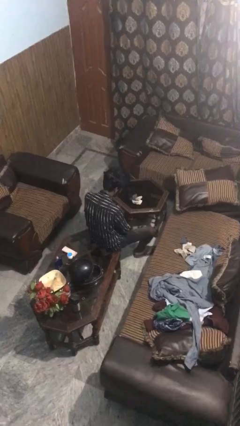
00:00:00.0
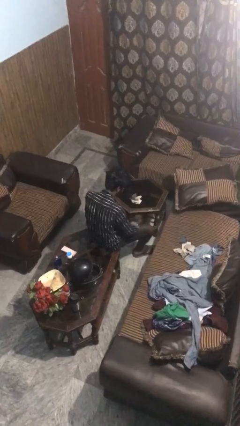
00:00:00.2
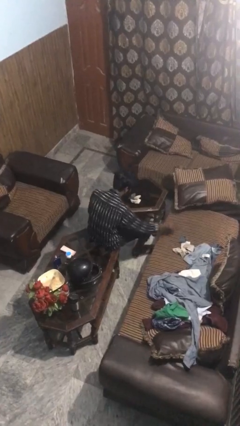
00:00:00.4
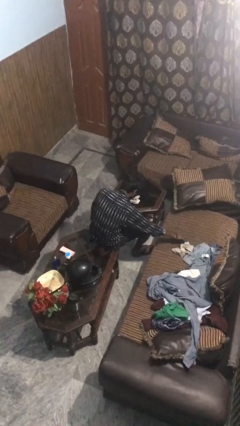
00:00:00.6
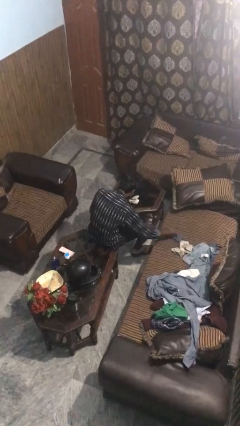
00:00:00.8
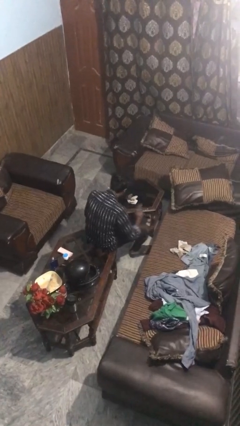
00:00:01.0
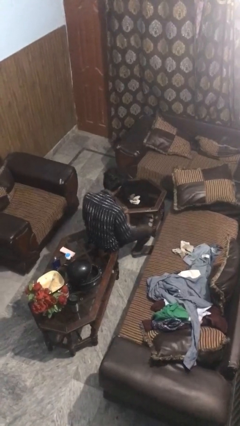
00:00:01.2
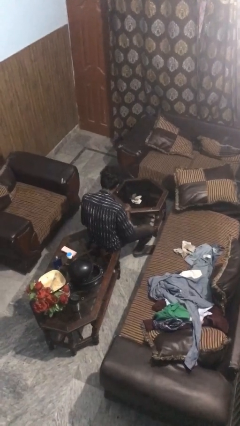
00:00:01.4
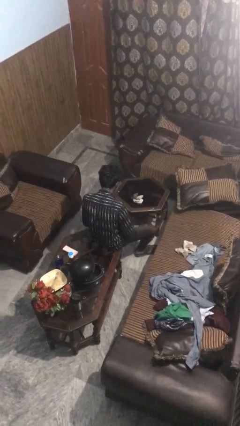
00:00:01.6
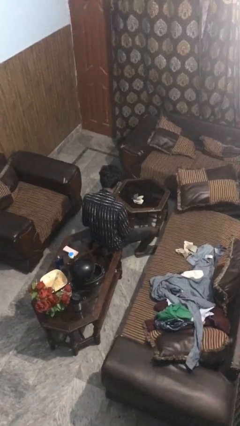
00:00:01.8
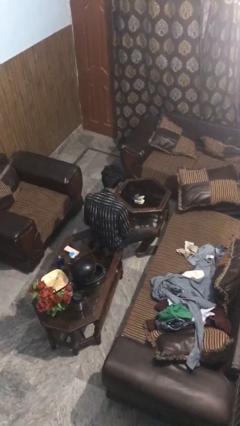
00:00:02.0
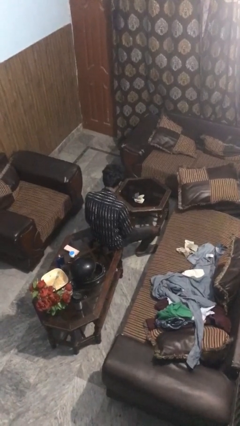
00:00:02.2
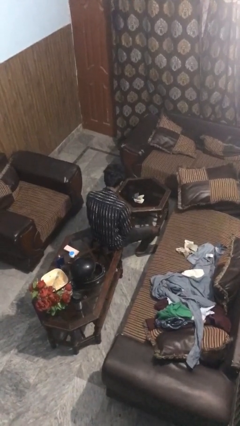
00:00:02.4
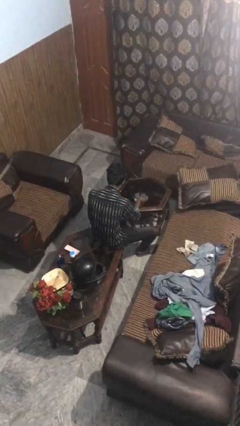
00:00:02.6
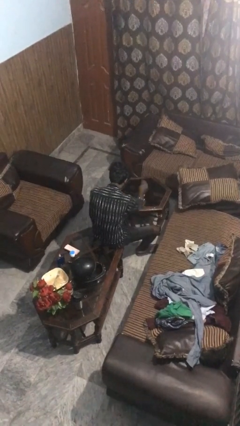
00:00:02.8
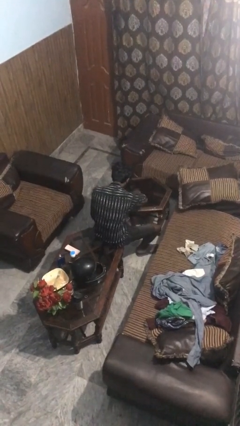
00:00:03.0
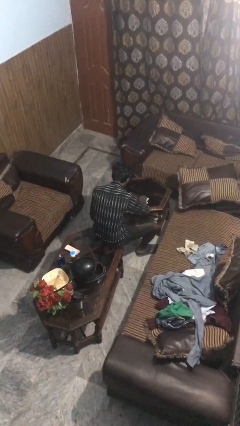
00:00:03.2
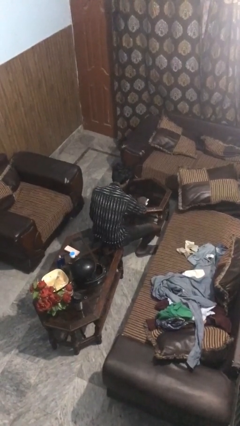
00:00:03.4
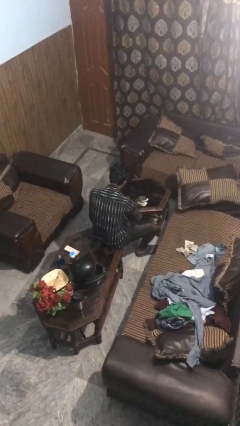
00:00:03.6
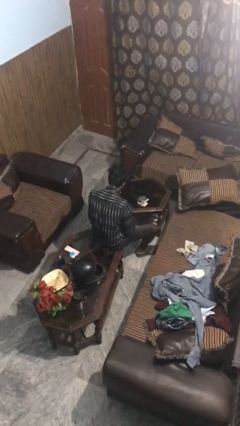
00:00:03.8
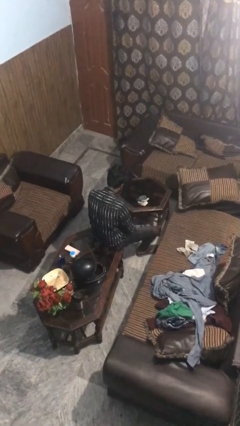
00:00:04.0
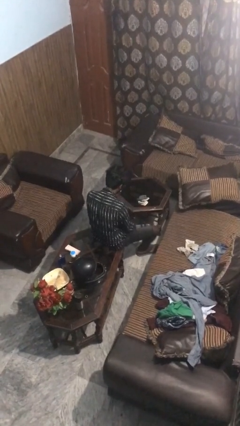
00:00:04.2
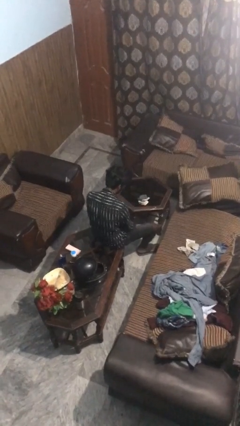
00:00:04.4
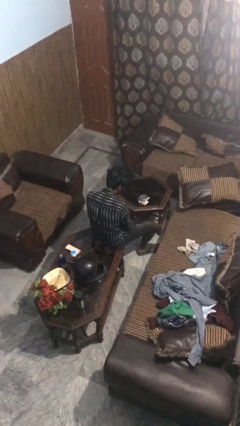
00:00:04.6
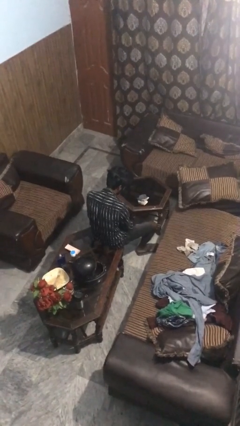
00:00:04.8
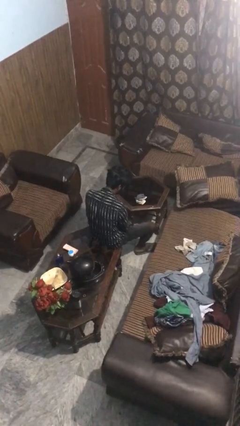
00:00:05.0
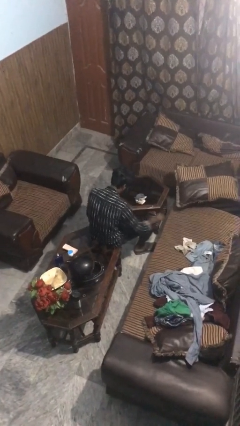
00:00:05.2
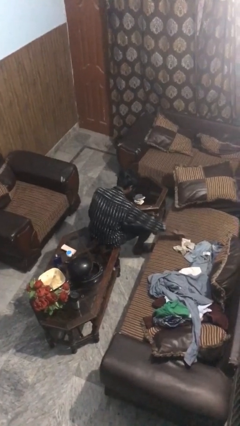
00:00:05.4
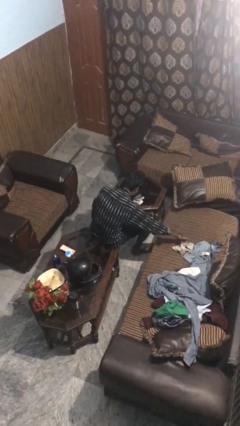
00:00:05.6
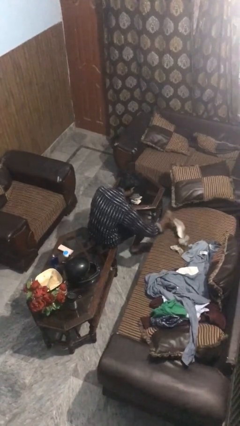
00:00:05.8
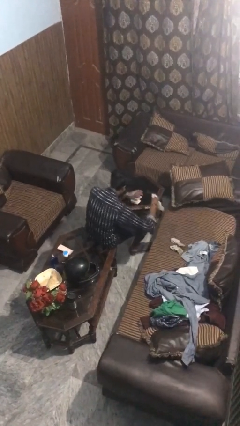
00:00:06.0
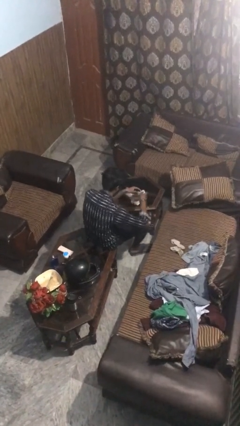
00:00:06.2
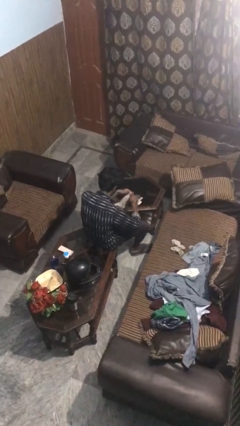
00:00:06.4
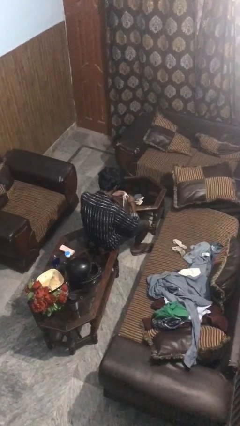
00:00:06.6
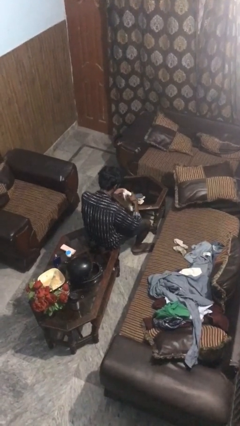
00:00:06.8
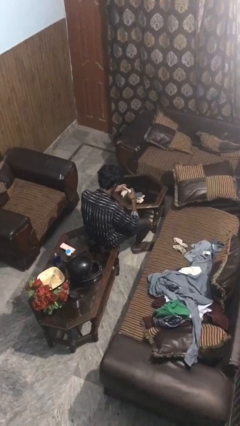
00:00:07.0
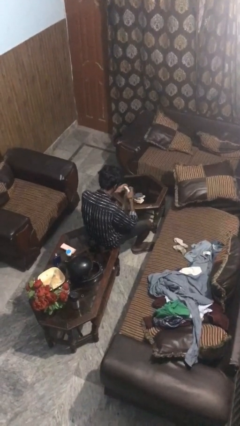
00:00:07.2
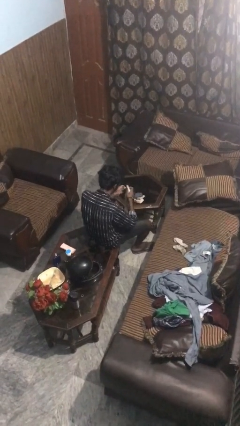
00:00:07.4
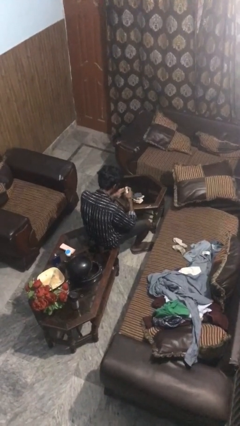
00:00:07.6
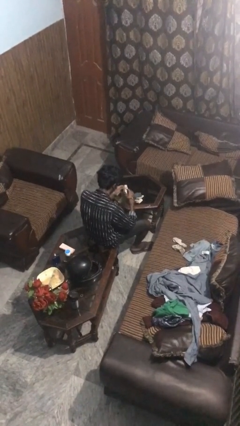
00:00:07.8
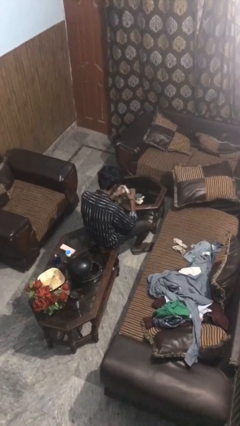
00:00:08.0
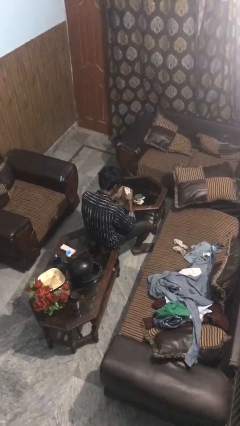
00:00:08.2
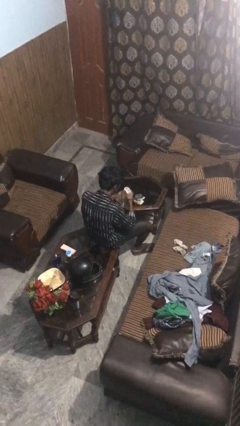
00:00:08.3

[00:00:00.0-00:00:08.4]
person folds socks

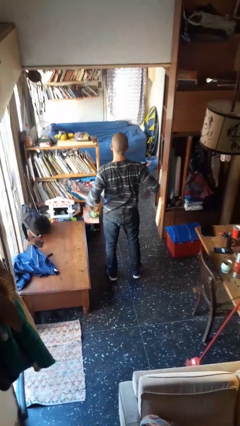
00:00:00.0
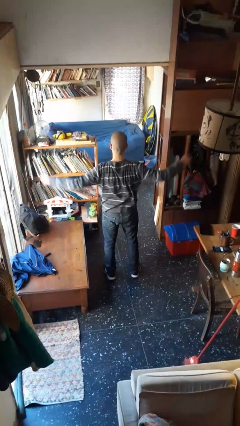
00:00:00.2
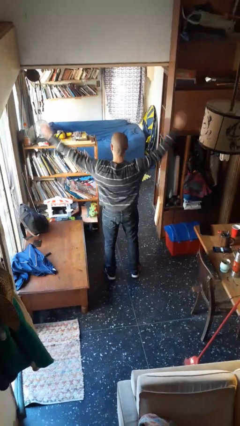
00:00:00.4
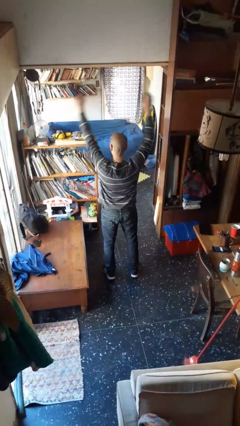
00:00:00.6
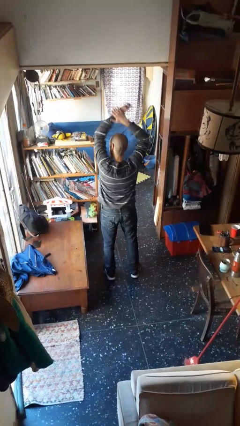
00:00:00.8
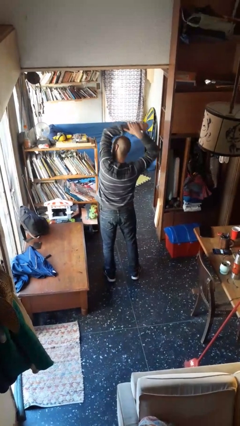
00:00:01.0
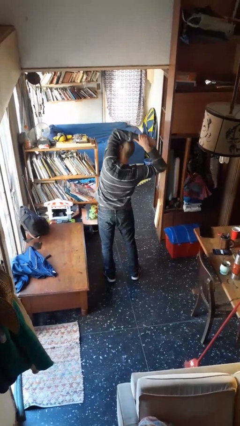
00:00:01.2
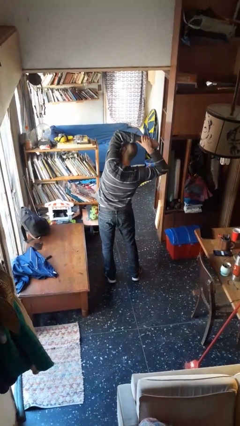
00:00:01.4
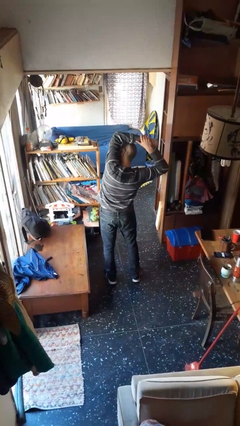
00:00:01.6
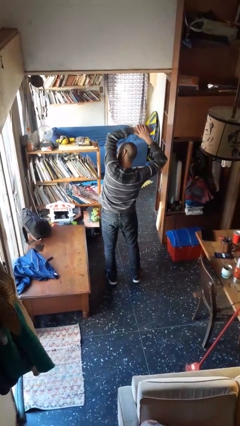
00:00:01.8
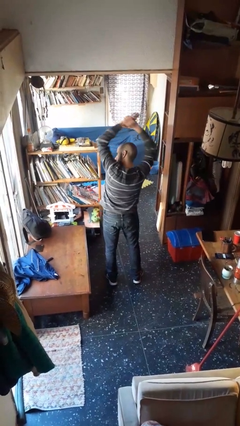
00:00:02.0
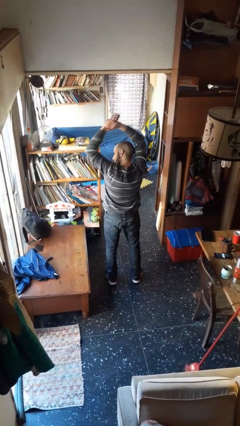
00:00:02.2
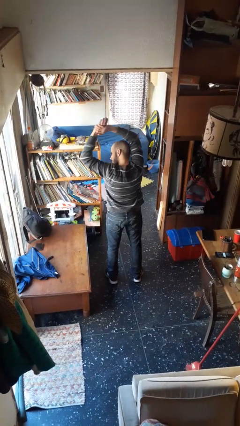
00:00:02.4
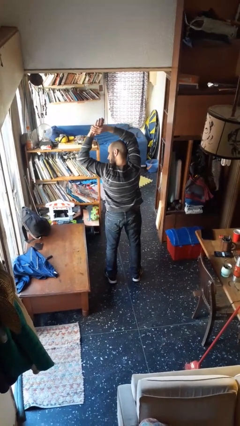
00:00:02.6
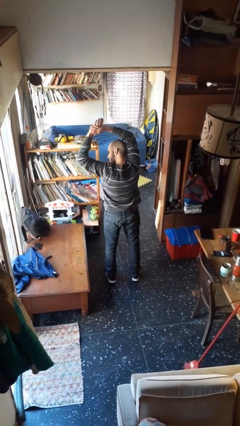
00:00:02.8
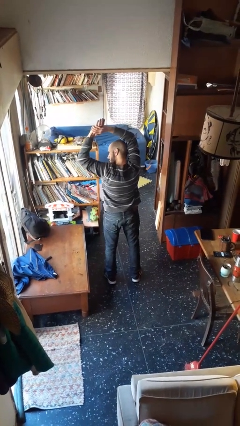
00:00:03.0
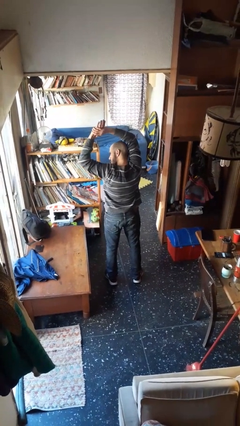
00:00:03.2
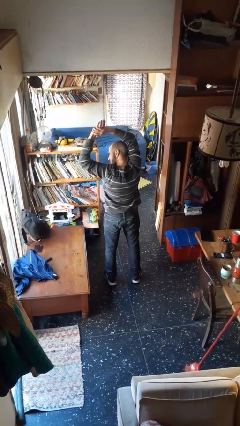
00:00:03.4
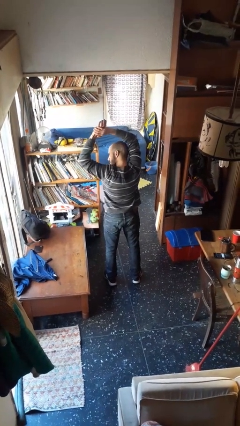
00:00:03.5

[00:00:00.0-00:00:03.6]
person stretches arms over head

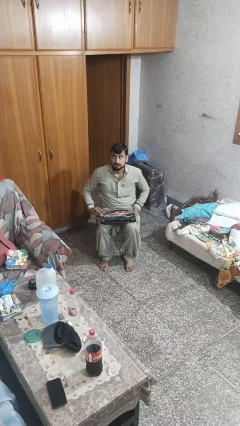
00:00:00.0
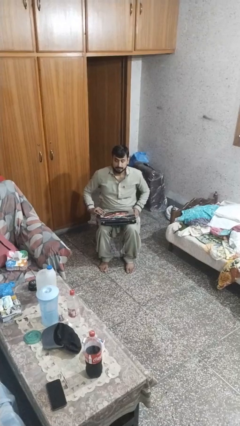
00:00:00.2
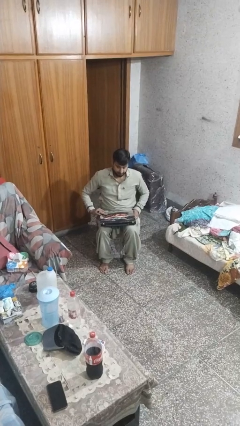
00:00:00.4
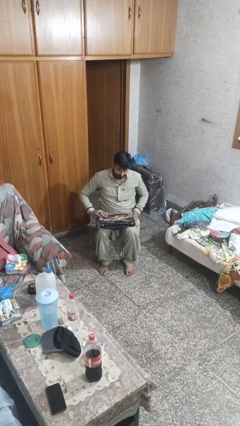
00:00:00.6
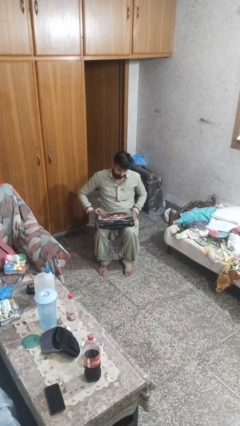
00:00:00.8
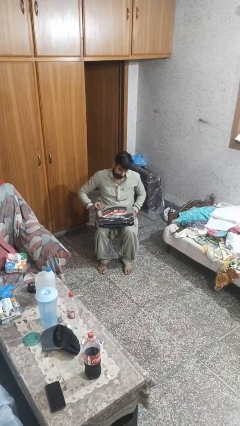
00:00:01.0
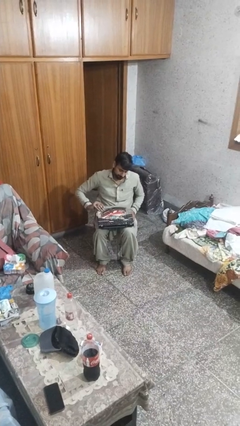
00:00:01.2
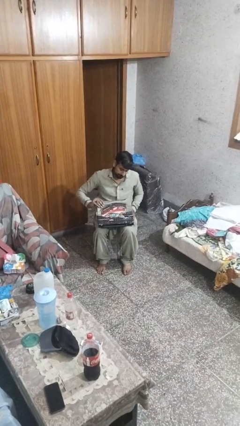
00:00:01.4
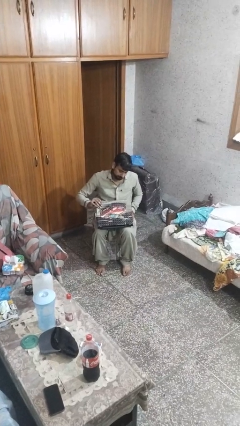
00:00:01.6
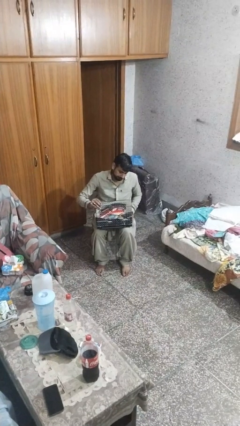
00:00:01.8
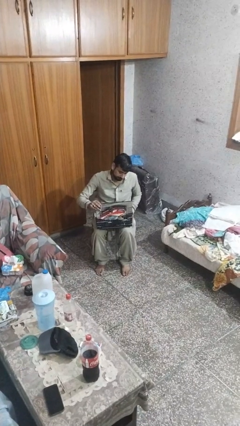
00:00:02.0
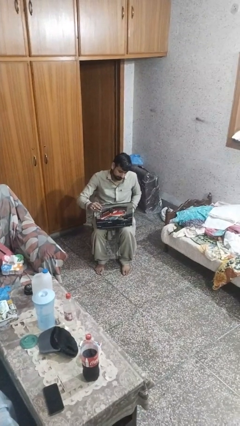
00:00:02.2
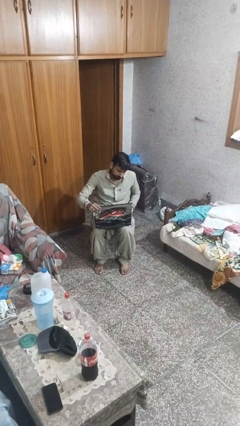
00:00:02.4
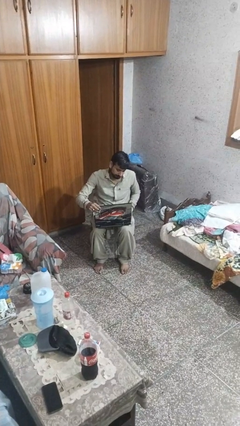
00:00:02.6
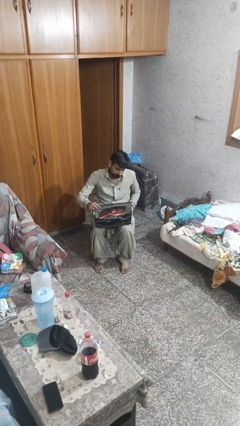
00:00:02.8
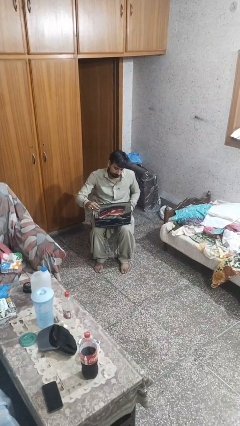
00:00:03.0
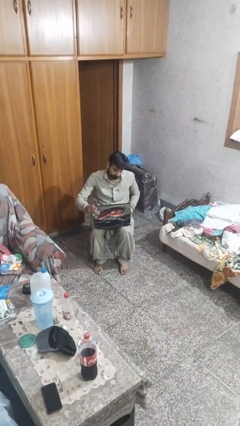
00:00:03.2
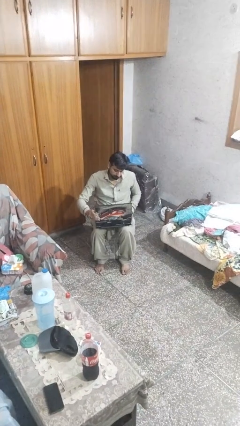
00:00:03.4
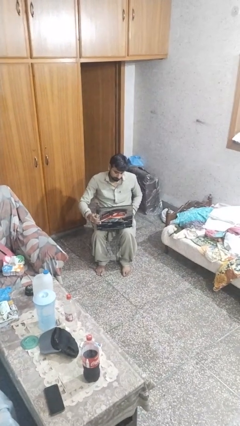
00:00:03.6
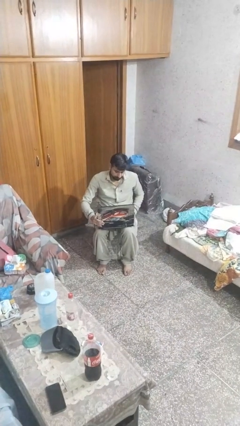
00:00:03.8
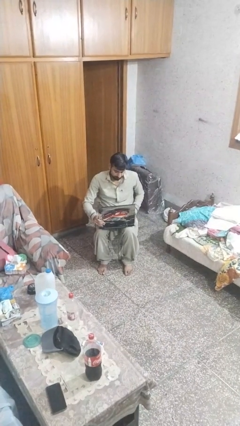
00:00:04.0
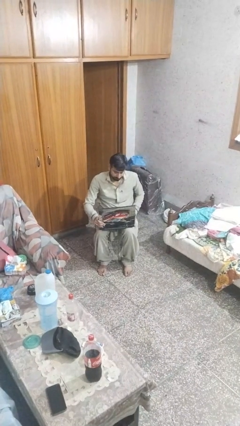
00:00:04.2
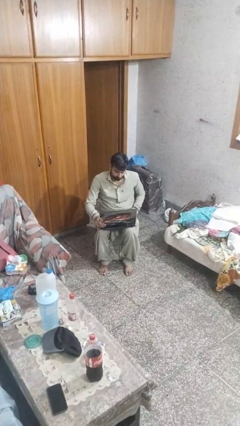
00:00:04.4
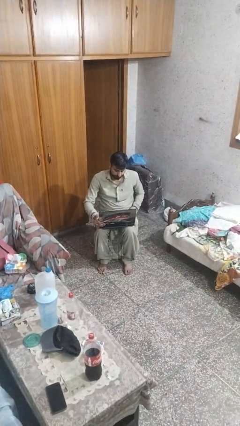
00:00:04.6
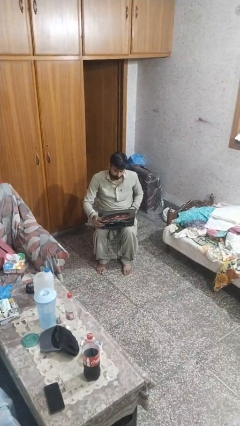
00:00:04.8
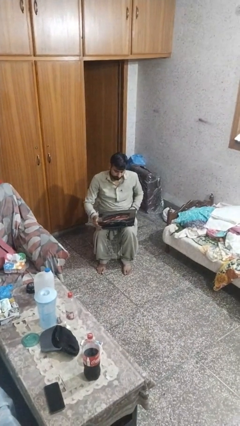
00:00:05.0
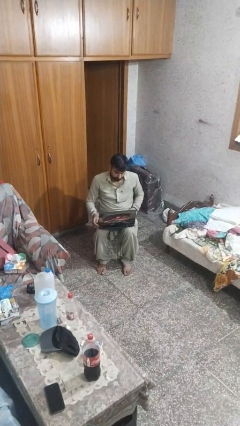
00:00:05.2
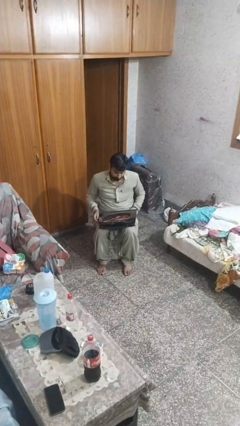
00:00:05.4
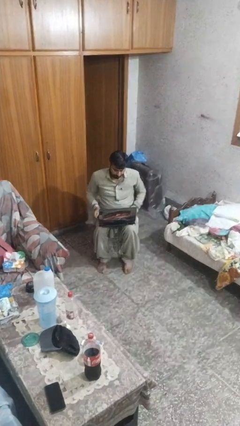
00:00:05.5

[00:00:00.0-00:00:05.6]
person opens laptop

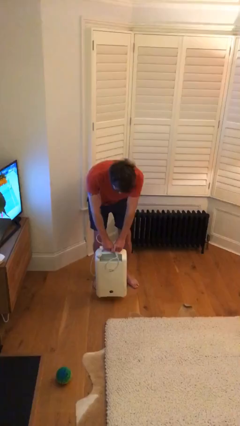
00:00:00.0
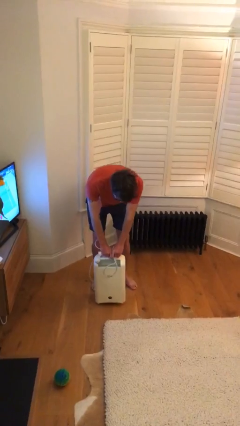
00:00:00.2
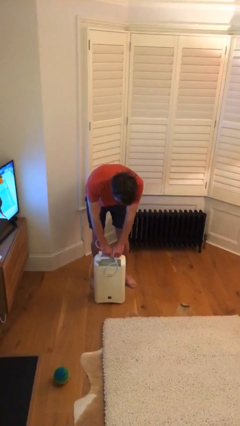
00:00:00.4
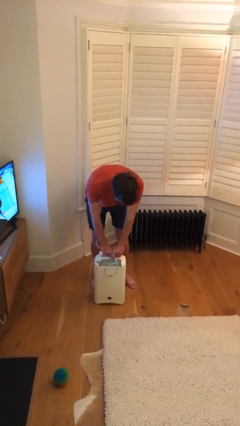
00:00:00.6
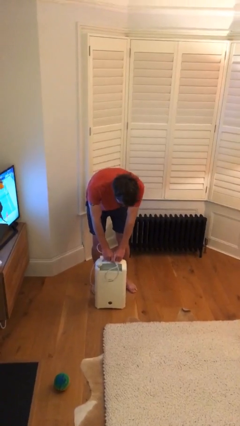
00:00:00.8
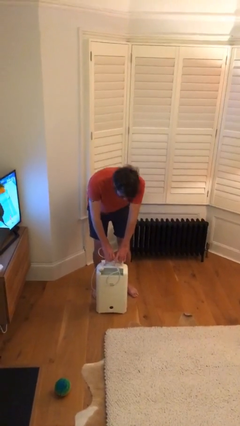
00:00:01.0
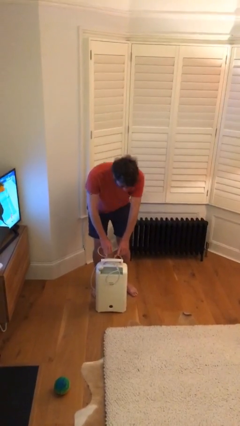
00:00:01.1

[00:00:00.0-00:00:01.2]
person puts down object on floor
